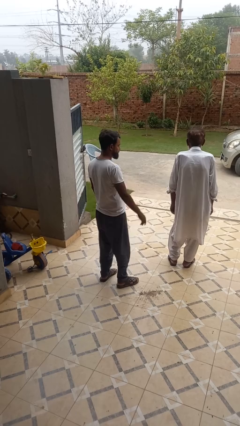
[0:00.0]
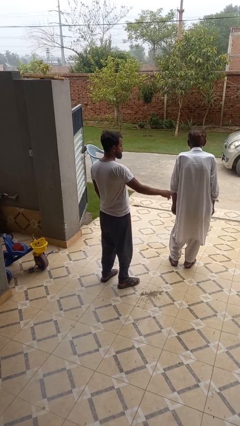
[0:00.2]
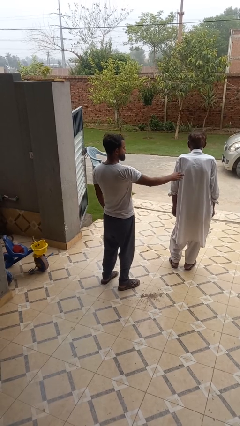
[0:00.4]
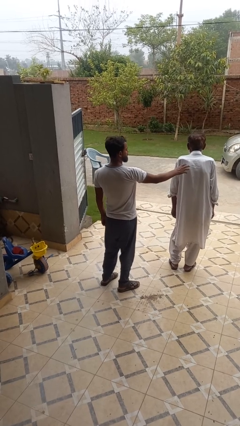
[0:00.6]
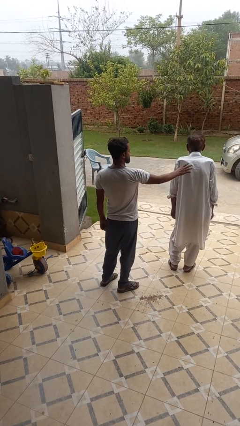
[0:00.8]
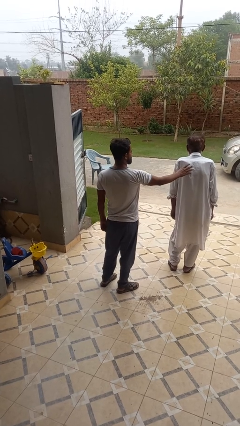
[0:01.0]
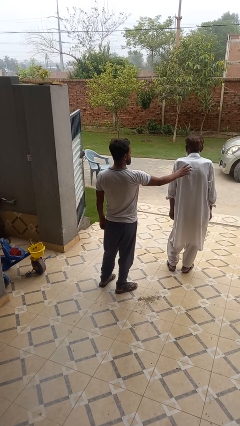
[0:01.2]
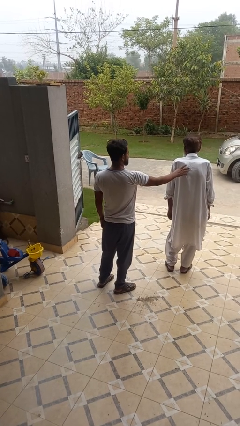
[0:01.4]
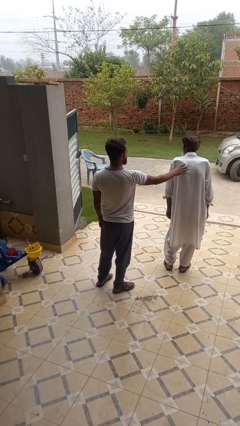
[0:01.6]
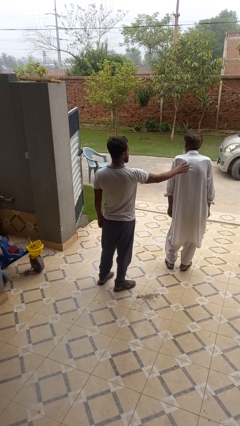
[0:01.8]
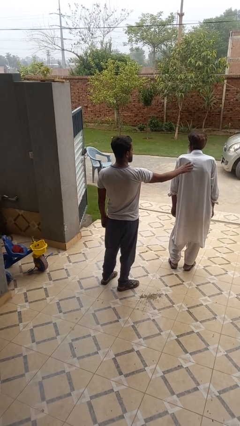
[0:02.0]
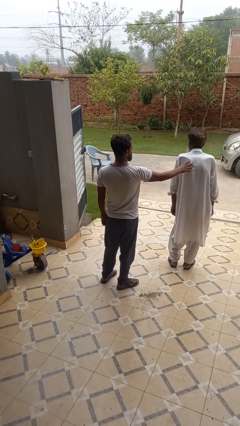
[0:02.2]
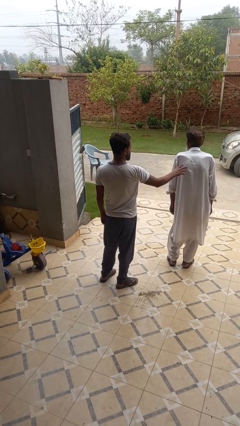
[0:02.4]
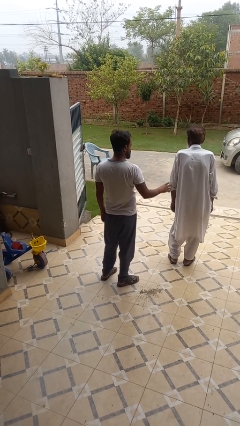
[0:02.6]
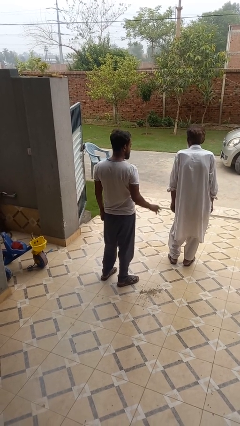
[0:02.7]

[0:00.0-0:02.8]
person touches back of person

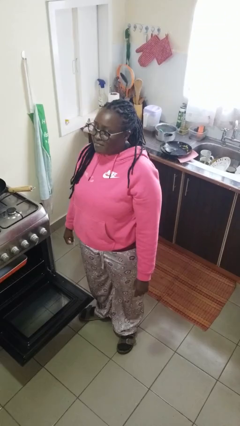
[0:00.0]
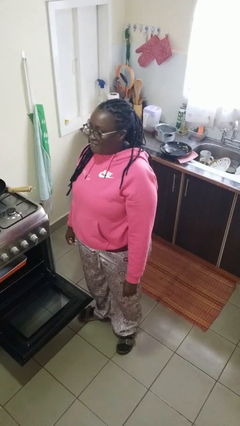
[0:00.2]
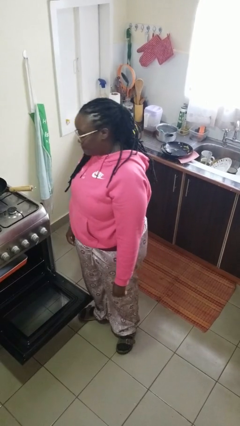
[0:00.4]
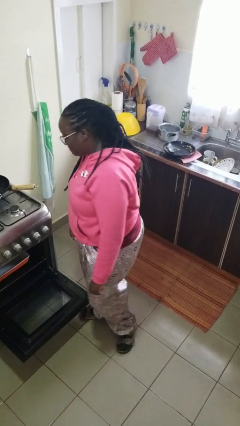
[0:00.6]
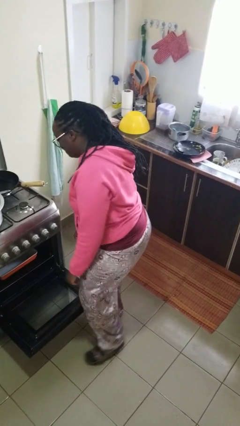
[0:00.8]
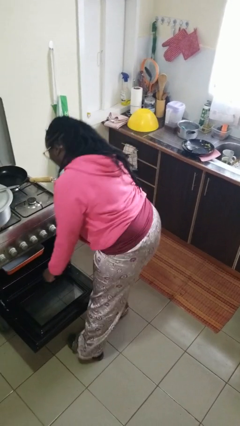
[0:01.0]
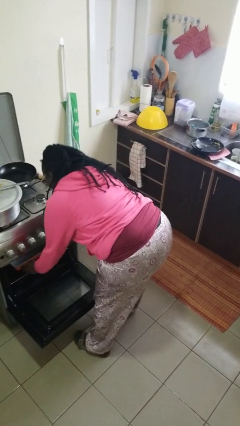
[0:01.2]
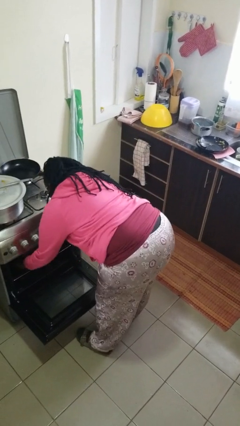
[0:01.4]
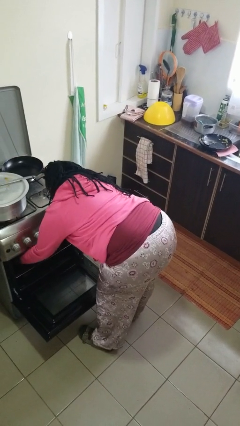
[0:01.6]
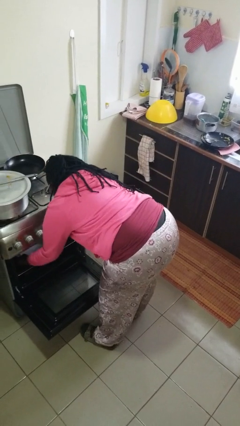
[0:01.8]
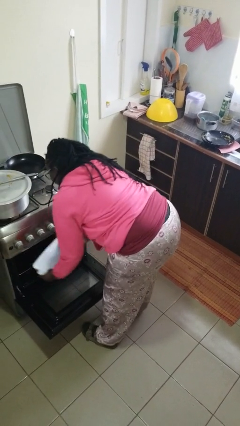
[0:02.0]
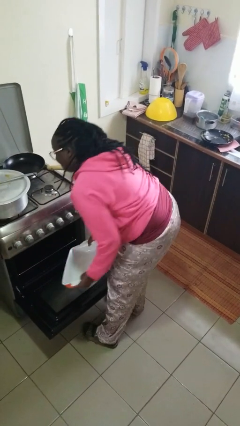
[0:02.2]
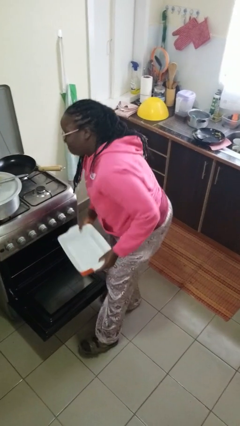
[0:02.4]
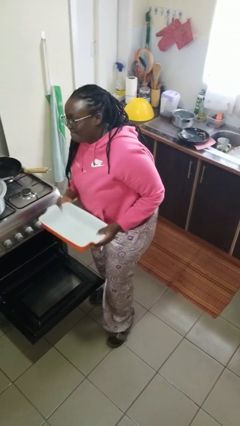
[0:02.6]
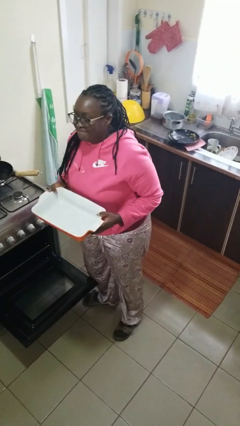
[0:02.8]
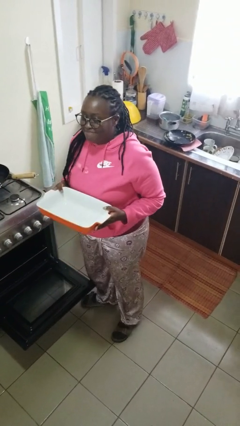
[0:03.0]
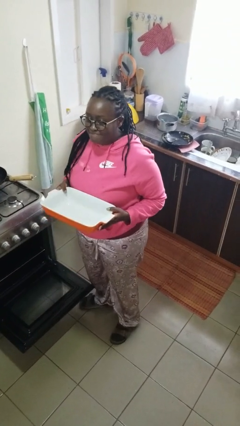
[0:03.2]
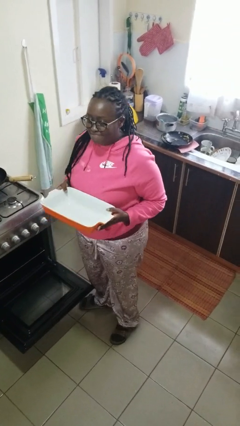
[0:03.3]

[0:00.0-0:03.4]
person takes object from oven

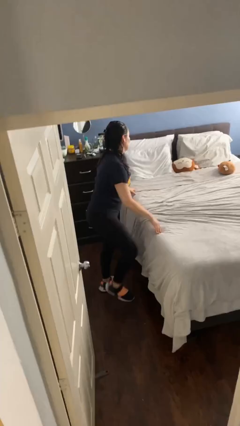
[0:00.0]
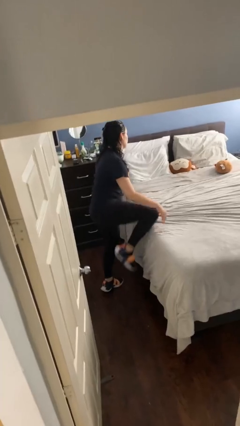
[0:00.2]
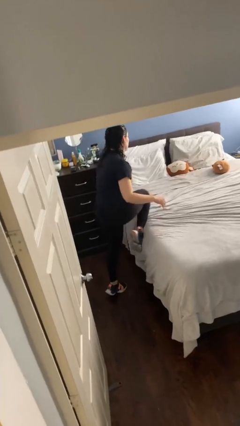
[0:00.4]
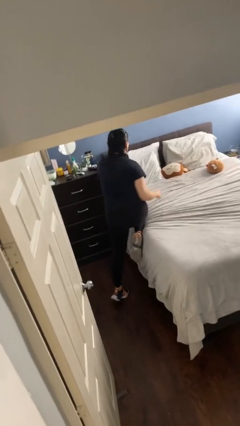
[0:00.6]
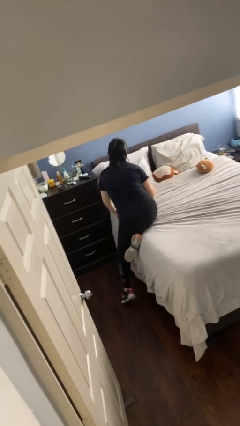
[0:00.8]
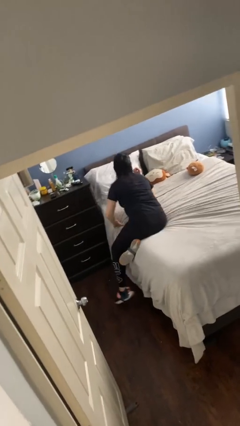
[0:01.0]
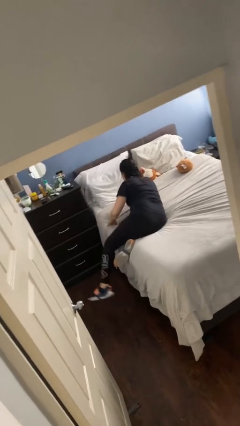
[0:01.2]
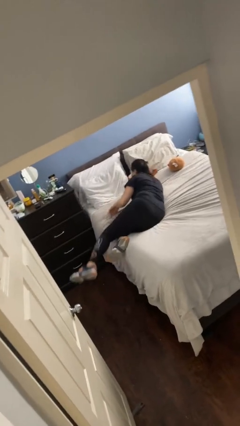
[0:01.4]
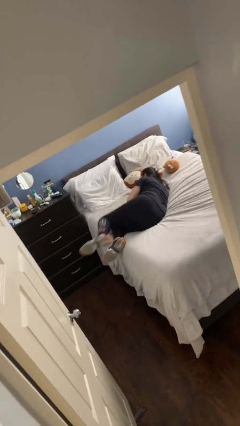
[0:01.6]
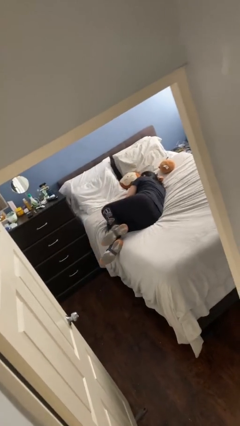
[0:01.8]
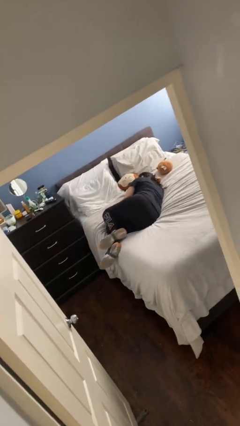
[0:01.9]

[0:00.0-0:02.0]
person lies down on bed

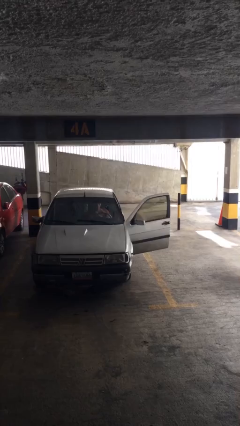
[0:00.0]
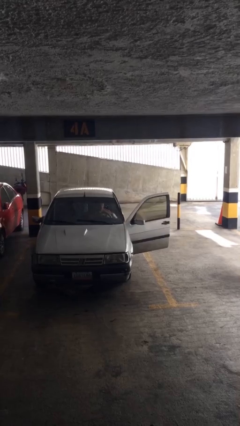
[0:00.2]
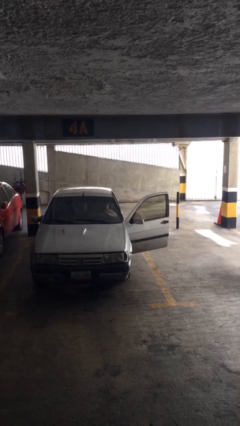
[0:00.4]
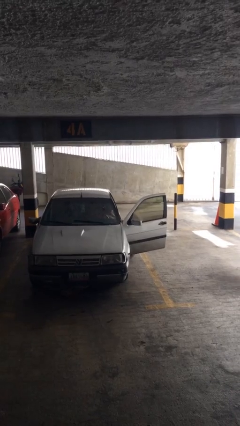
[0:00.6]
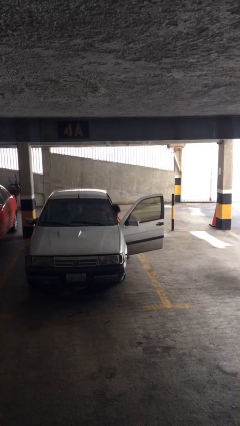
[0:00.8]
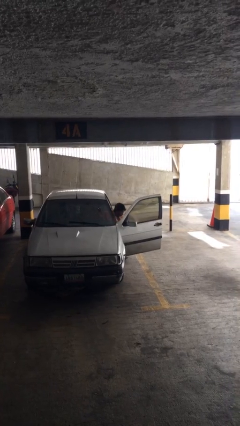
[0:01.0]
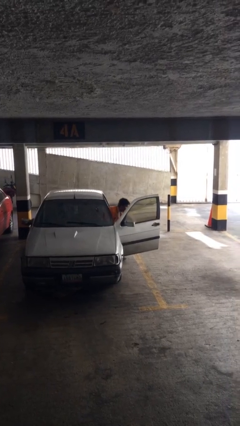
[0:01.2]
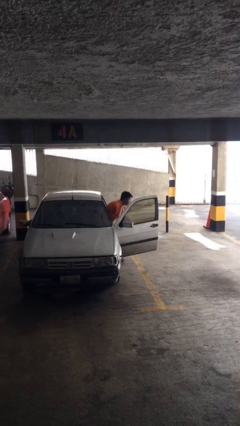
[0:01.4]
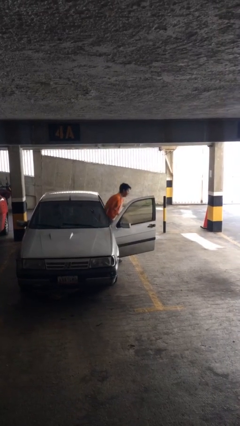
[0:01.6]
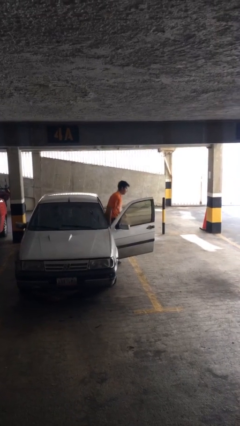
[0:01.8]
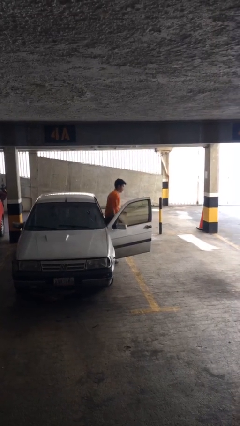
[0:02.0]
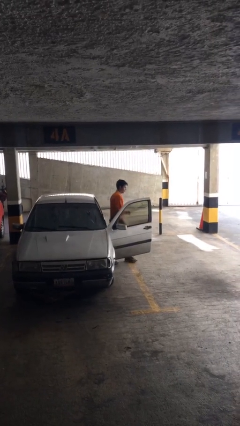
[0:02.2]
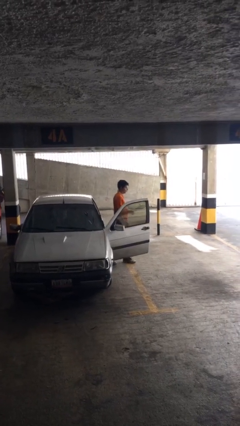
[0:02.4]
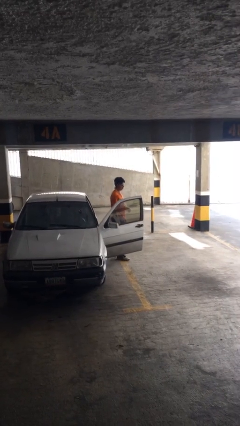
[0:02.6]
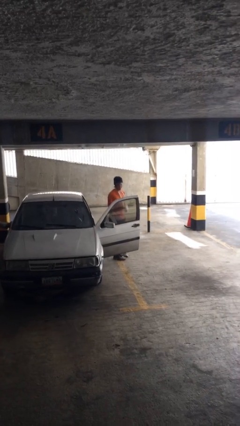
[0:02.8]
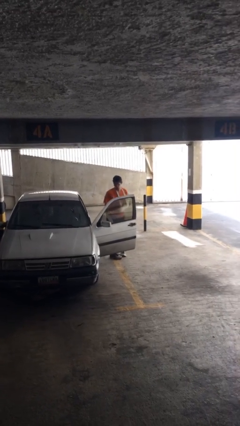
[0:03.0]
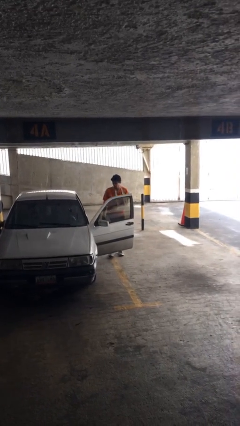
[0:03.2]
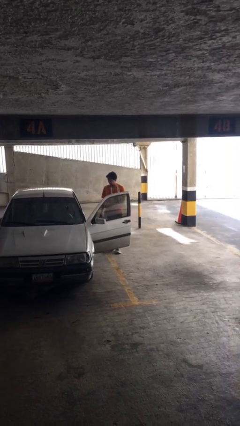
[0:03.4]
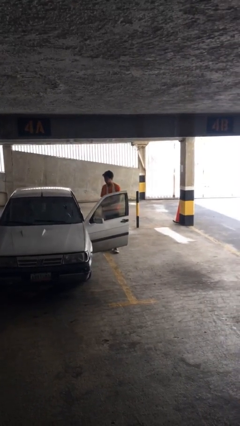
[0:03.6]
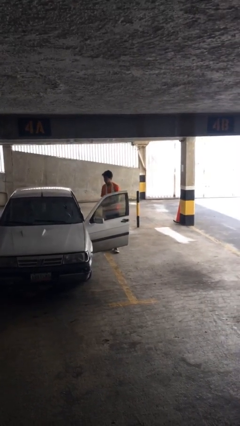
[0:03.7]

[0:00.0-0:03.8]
person exits car

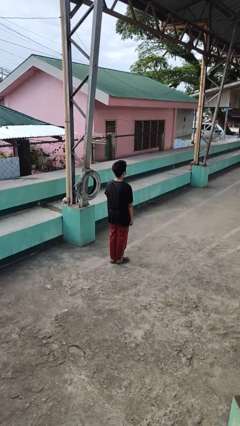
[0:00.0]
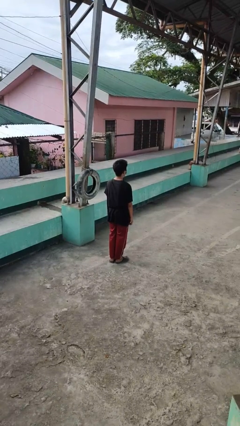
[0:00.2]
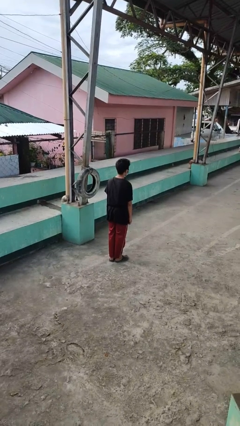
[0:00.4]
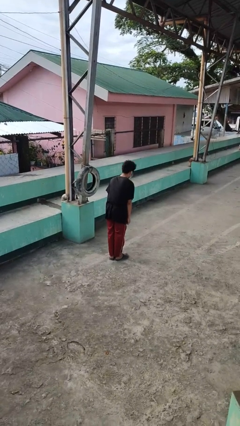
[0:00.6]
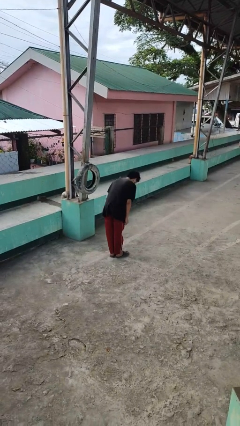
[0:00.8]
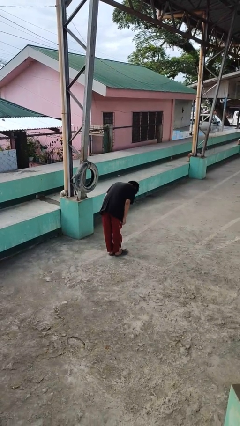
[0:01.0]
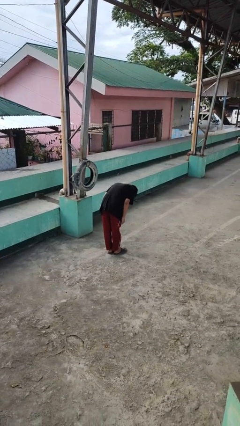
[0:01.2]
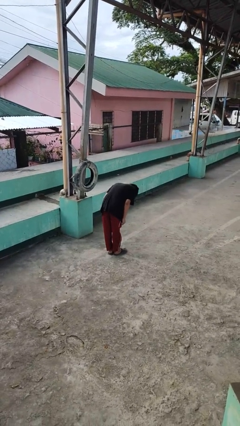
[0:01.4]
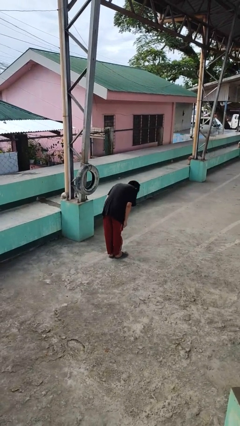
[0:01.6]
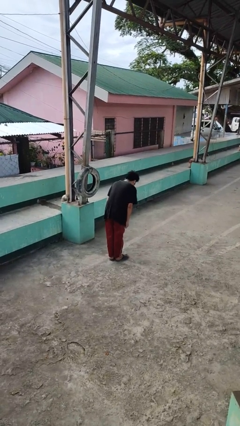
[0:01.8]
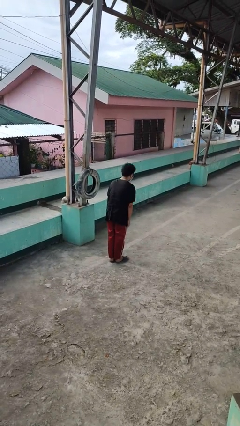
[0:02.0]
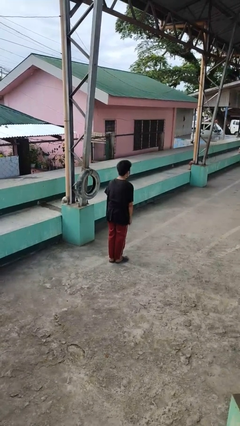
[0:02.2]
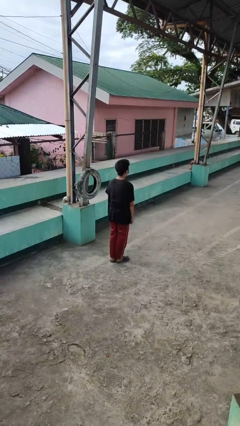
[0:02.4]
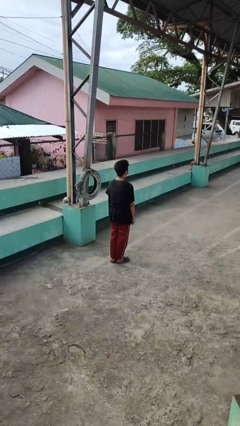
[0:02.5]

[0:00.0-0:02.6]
person bows

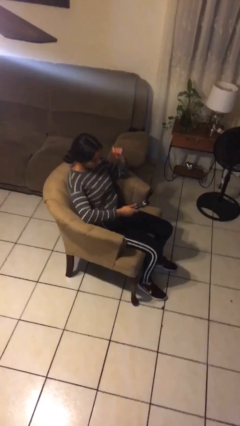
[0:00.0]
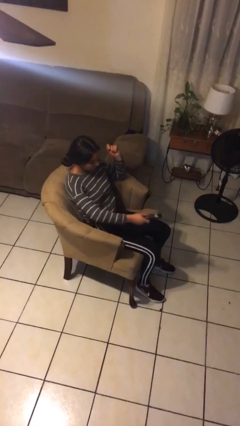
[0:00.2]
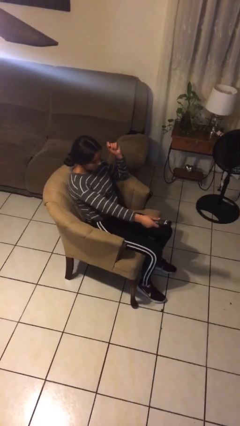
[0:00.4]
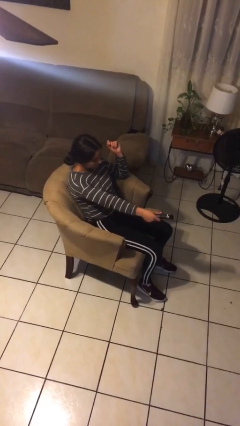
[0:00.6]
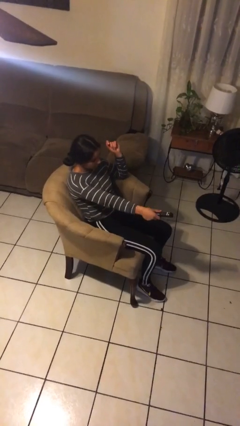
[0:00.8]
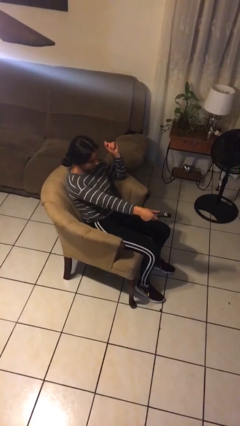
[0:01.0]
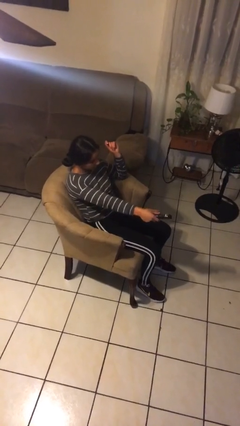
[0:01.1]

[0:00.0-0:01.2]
person uses television remote

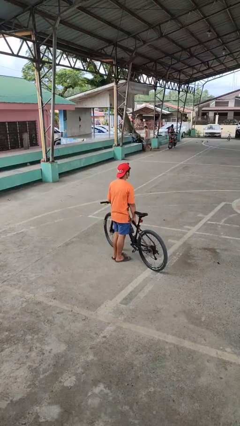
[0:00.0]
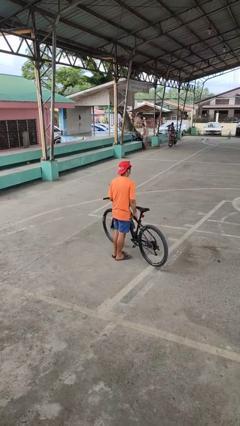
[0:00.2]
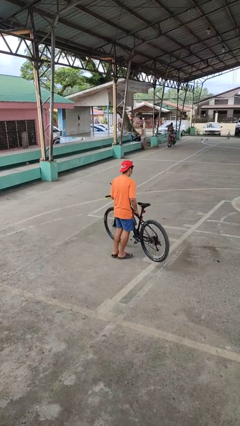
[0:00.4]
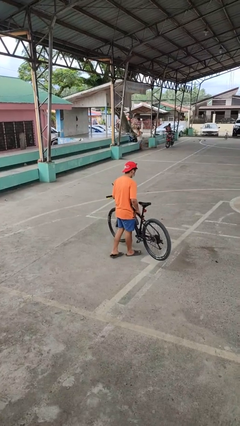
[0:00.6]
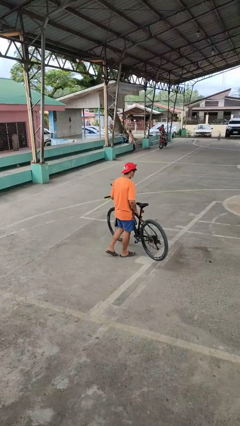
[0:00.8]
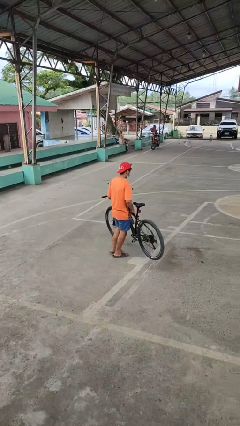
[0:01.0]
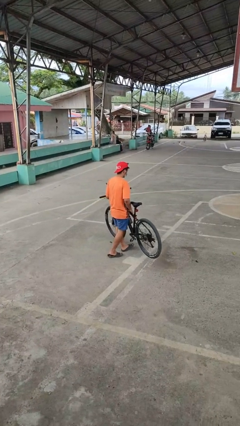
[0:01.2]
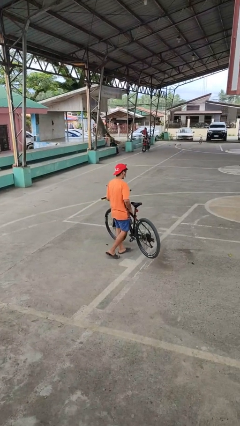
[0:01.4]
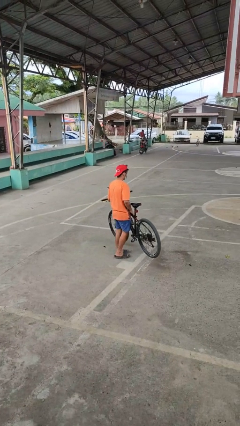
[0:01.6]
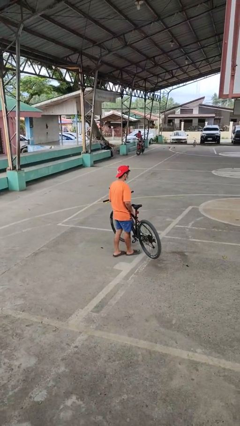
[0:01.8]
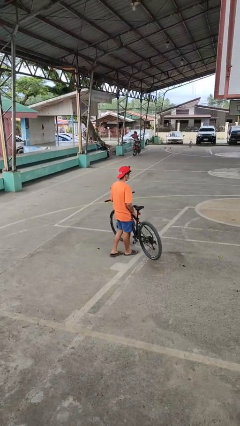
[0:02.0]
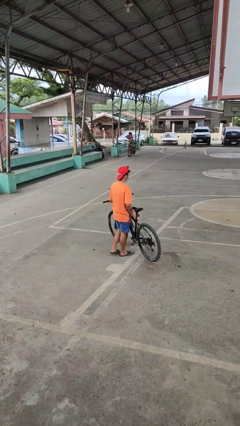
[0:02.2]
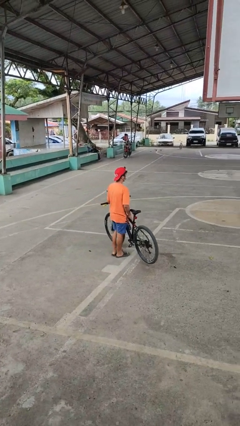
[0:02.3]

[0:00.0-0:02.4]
person carries bicycle
